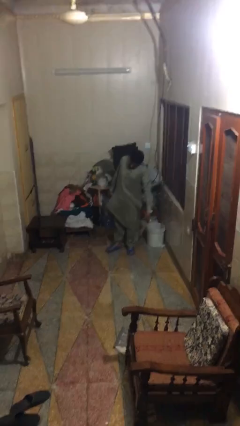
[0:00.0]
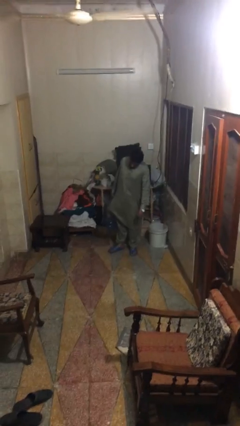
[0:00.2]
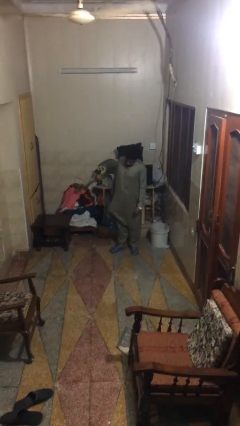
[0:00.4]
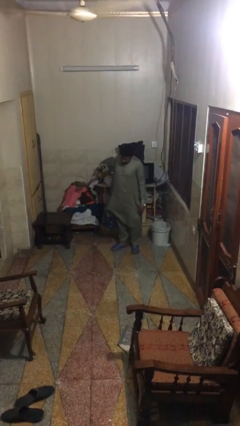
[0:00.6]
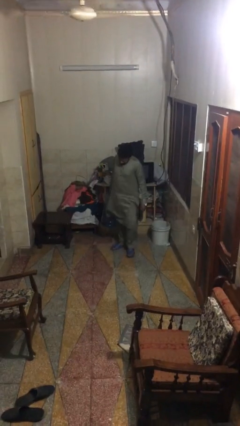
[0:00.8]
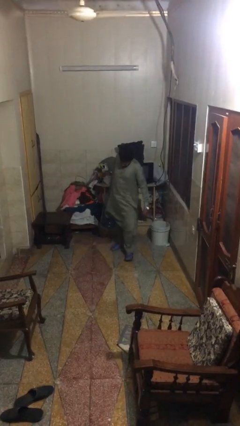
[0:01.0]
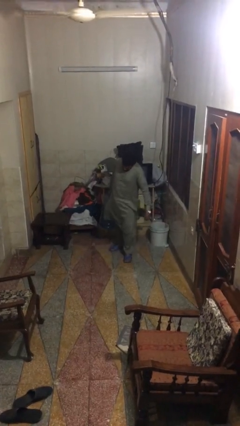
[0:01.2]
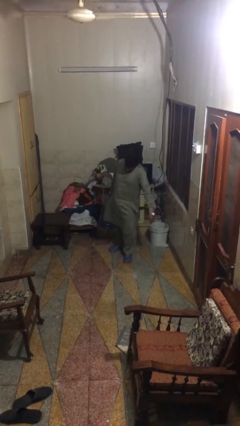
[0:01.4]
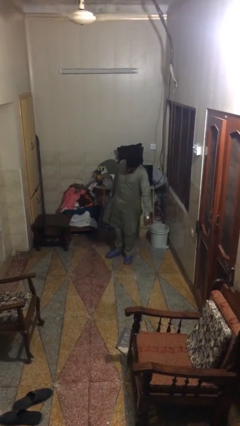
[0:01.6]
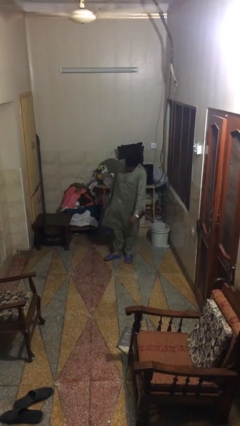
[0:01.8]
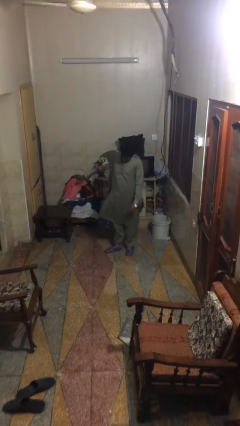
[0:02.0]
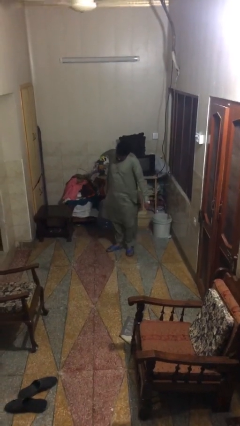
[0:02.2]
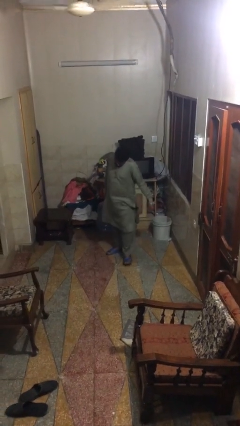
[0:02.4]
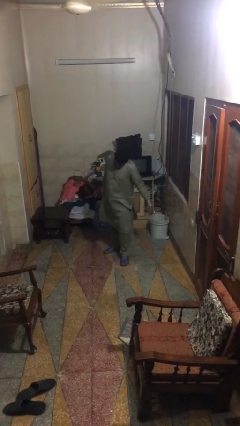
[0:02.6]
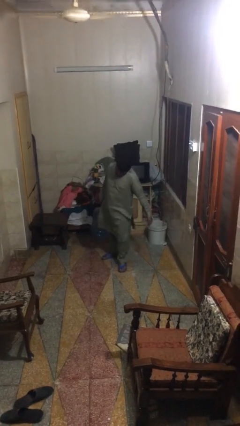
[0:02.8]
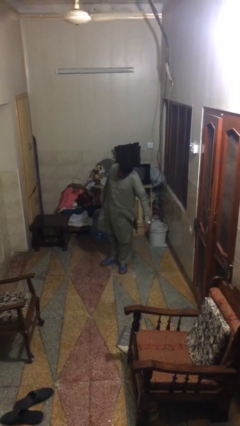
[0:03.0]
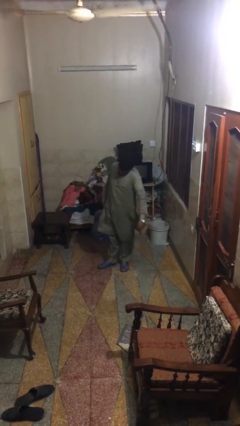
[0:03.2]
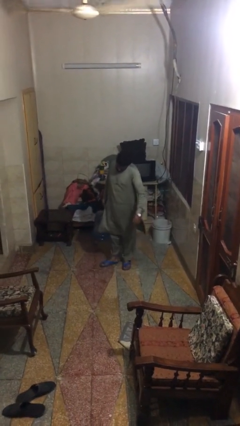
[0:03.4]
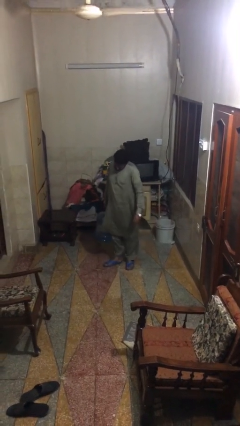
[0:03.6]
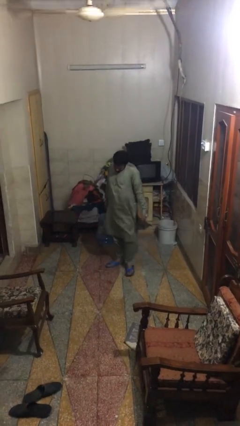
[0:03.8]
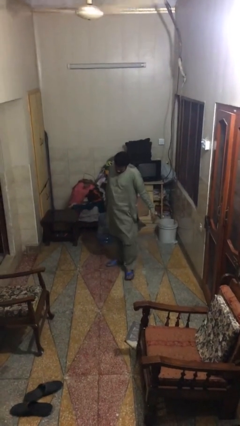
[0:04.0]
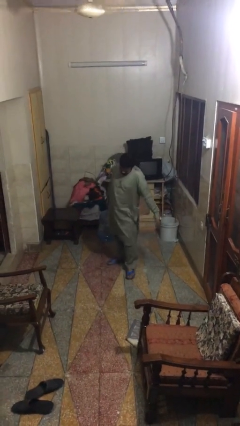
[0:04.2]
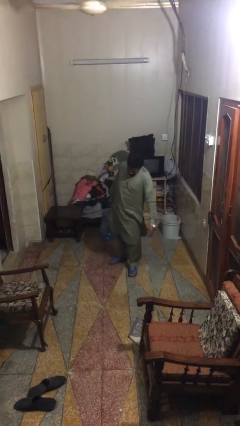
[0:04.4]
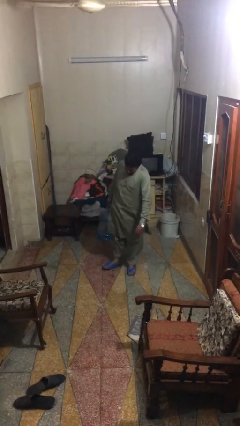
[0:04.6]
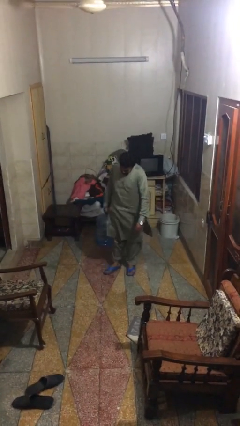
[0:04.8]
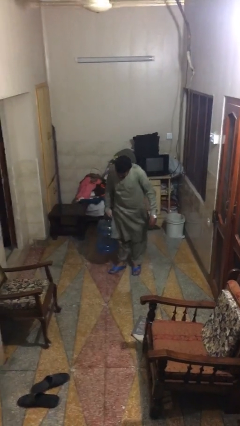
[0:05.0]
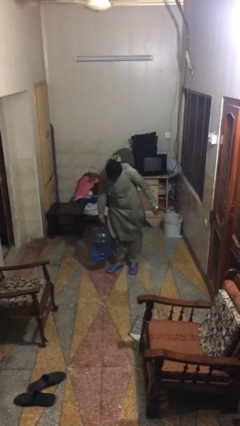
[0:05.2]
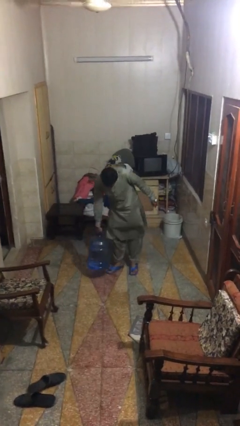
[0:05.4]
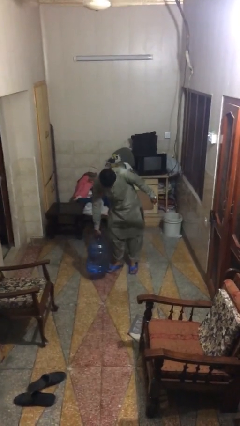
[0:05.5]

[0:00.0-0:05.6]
person carries heavy object

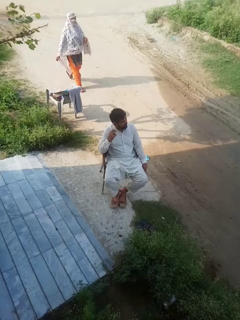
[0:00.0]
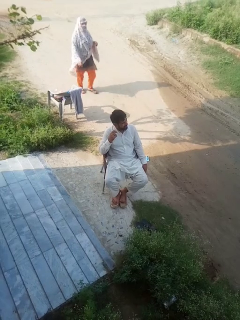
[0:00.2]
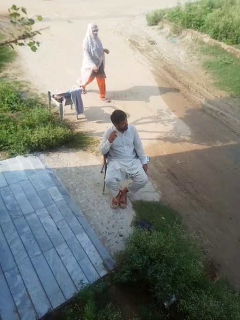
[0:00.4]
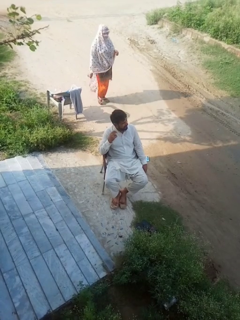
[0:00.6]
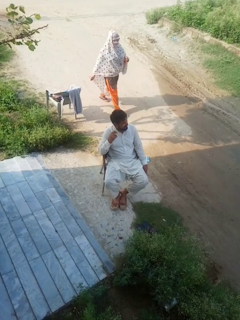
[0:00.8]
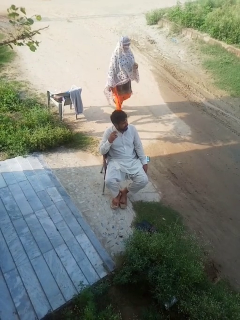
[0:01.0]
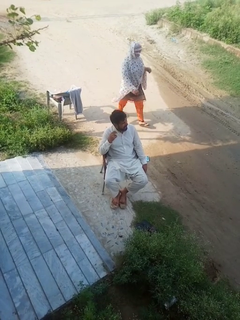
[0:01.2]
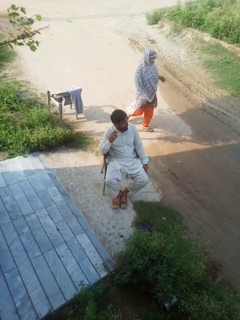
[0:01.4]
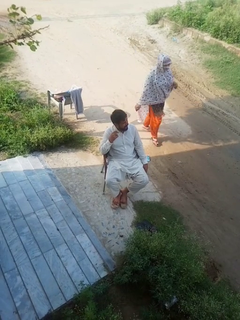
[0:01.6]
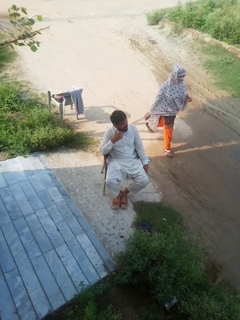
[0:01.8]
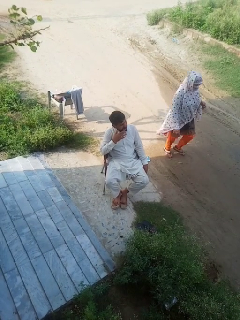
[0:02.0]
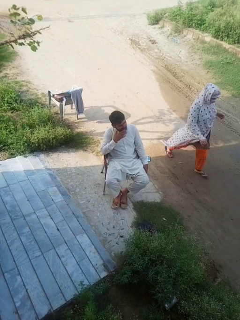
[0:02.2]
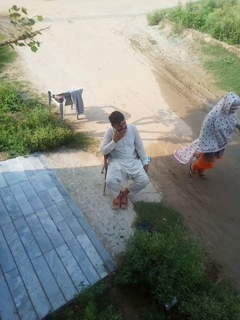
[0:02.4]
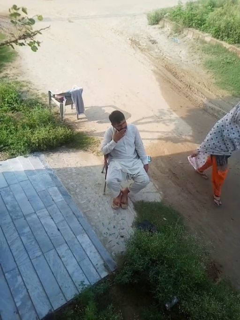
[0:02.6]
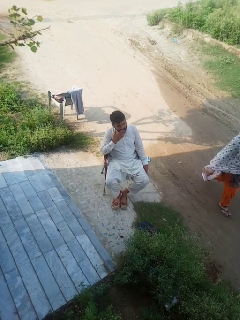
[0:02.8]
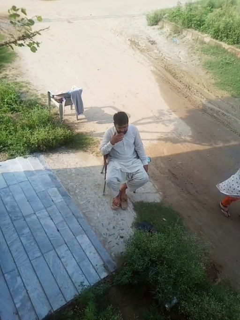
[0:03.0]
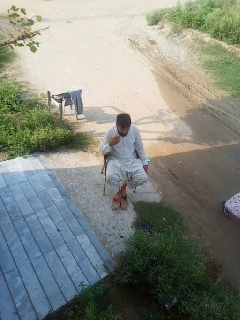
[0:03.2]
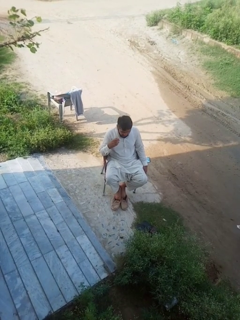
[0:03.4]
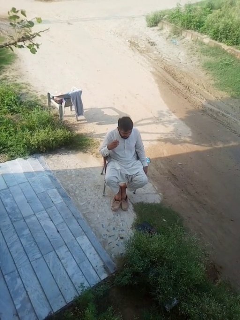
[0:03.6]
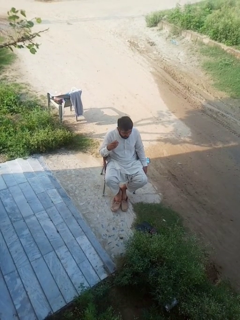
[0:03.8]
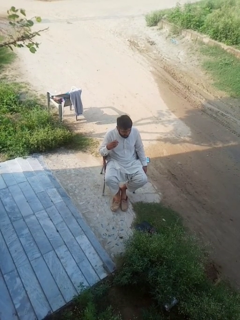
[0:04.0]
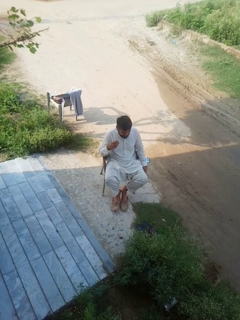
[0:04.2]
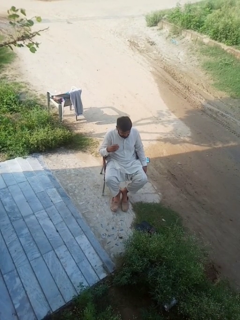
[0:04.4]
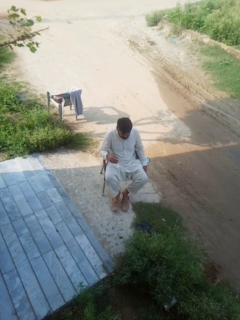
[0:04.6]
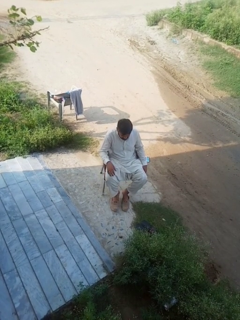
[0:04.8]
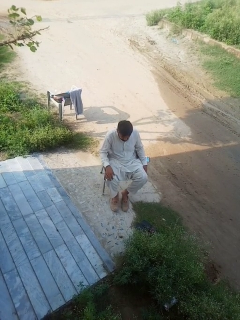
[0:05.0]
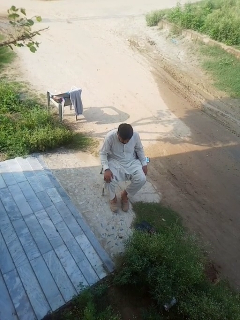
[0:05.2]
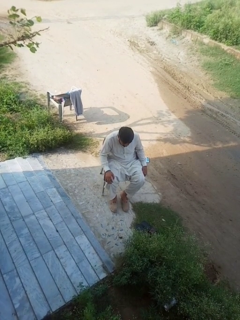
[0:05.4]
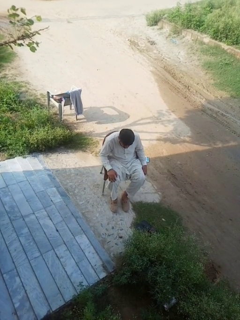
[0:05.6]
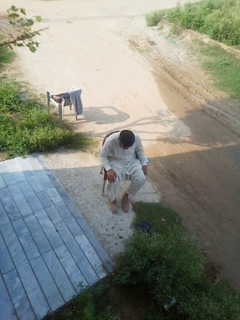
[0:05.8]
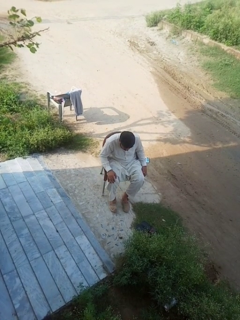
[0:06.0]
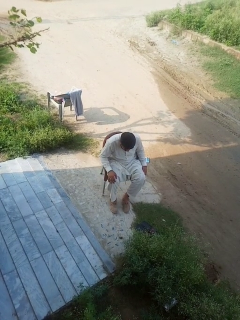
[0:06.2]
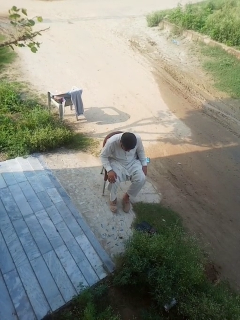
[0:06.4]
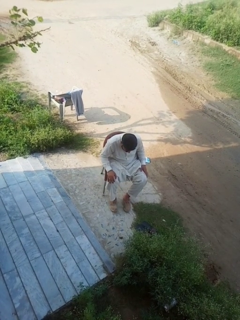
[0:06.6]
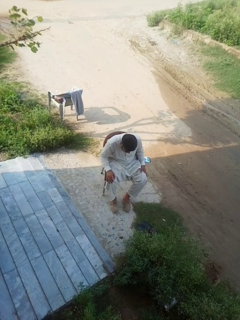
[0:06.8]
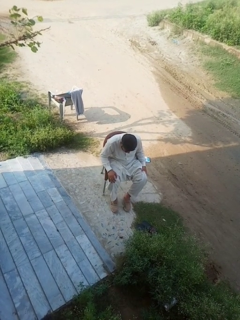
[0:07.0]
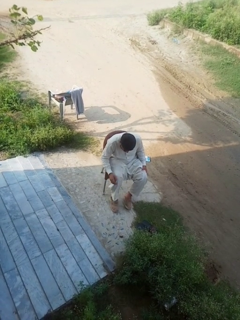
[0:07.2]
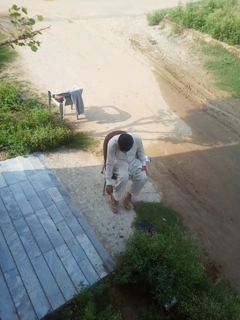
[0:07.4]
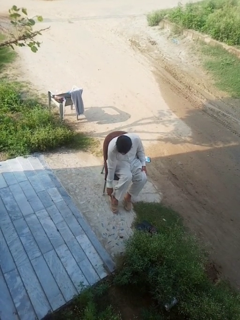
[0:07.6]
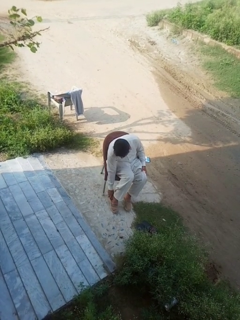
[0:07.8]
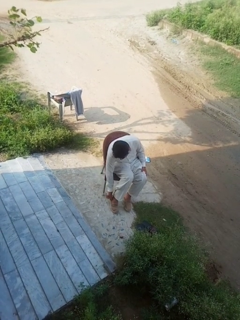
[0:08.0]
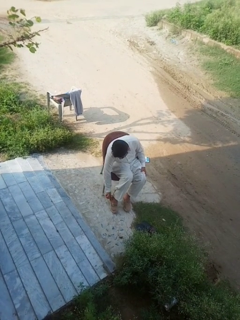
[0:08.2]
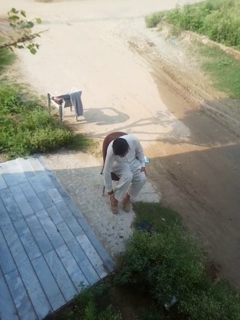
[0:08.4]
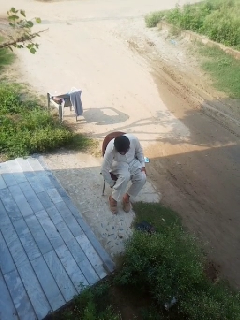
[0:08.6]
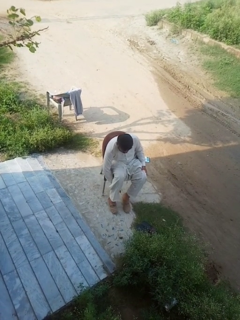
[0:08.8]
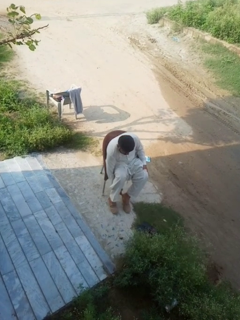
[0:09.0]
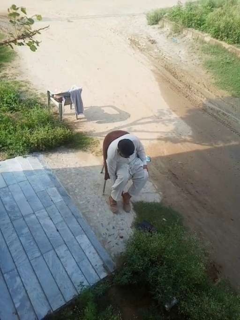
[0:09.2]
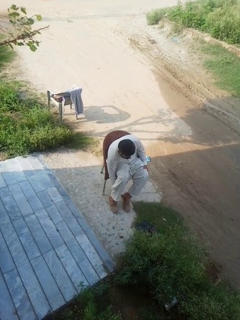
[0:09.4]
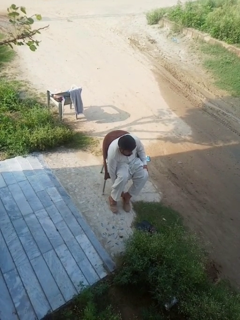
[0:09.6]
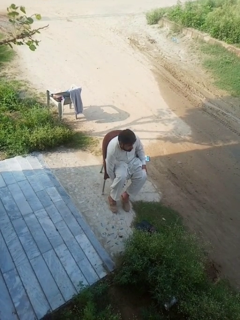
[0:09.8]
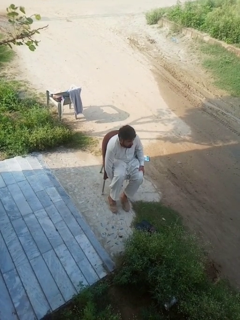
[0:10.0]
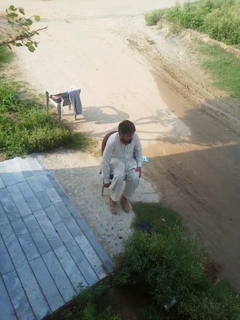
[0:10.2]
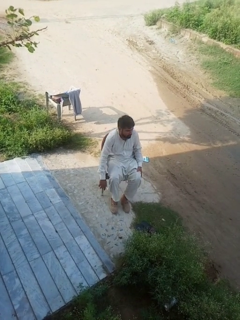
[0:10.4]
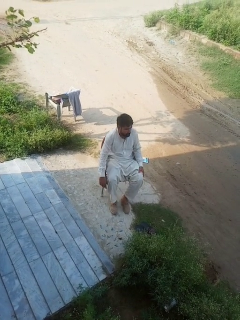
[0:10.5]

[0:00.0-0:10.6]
person puts on shoes

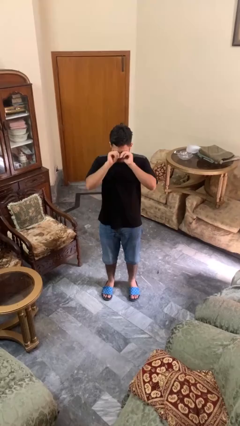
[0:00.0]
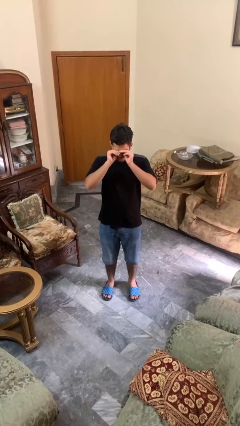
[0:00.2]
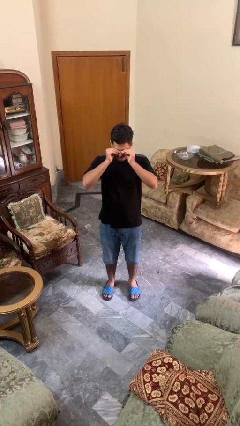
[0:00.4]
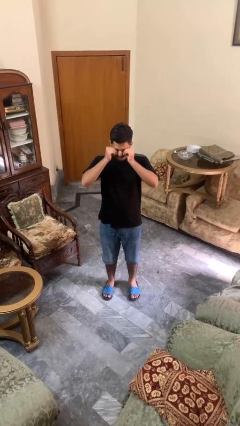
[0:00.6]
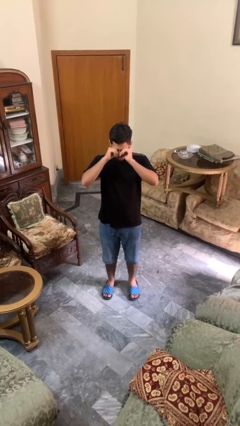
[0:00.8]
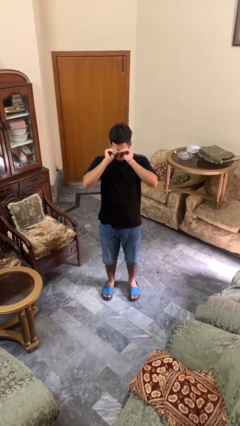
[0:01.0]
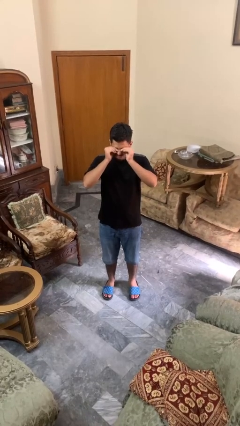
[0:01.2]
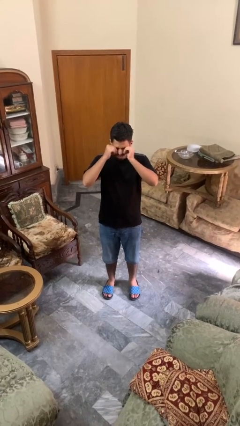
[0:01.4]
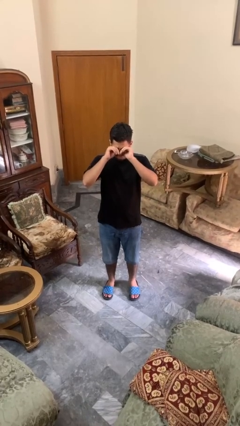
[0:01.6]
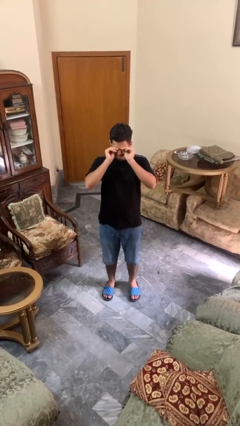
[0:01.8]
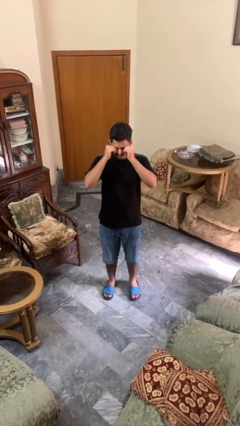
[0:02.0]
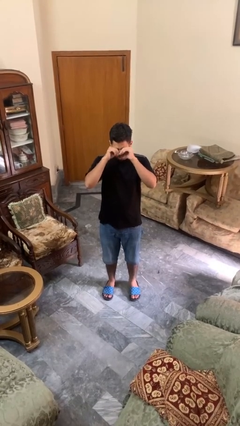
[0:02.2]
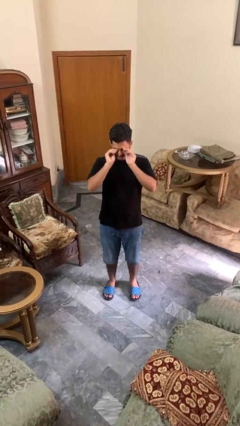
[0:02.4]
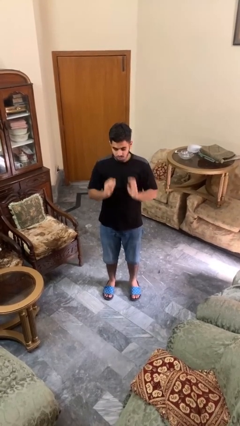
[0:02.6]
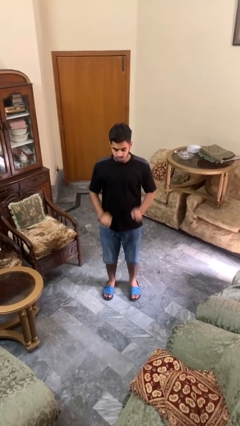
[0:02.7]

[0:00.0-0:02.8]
person rubs eyes

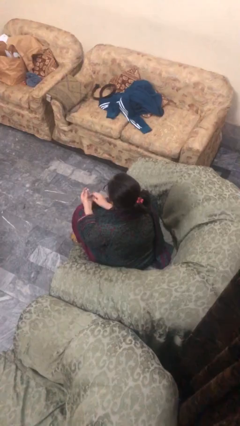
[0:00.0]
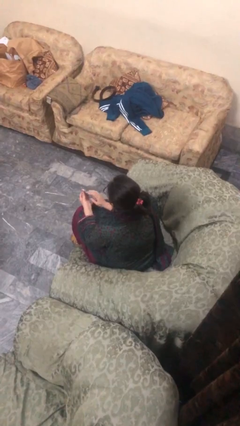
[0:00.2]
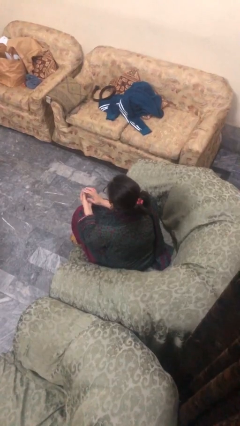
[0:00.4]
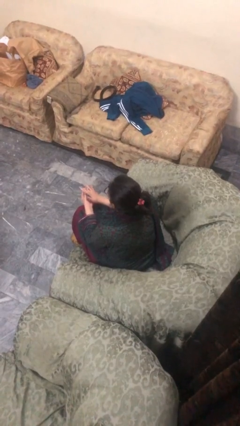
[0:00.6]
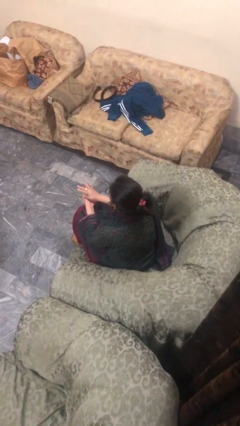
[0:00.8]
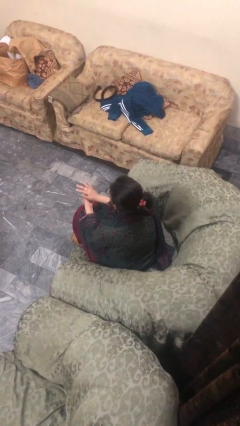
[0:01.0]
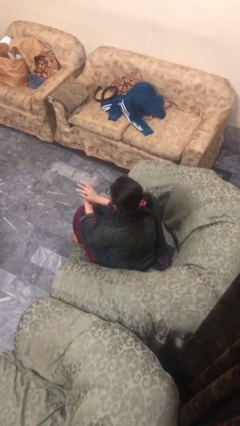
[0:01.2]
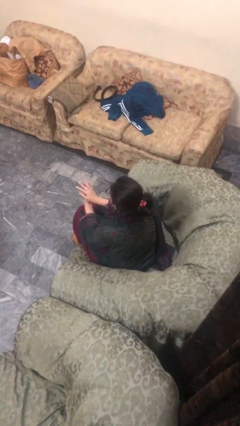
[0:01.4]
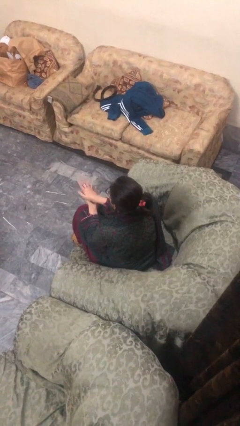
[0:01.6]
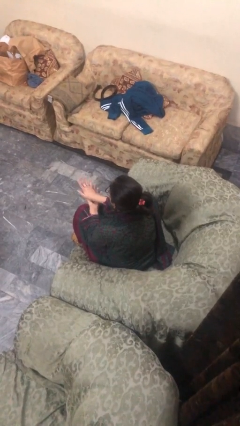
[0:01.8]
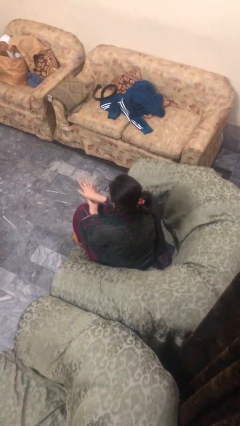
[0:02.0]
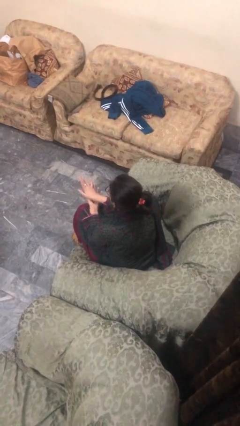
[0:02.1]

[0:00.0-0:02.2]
person puts on ring
